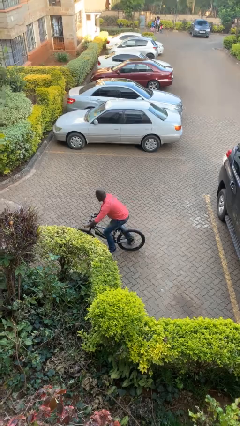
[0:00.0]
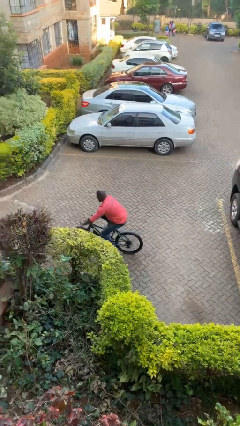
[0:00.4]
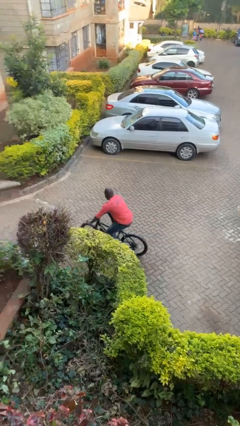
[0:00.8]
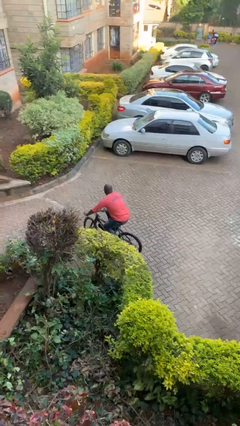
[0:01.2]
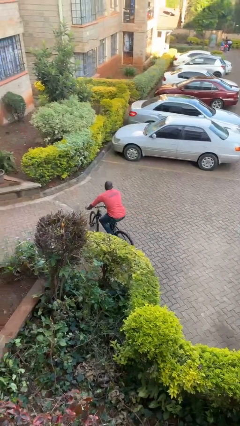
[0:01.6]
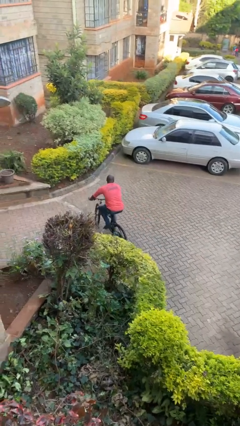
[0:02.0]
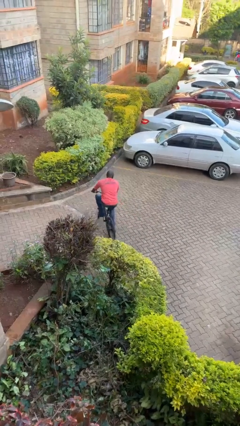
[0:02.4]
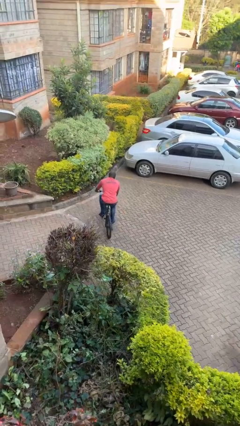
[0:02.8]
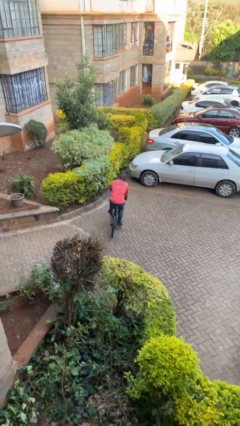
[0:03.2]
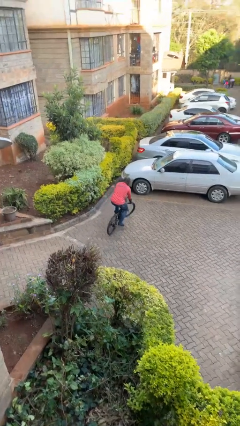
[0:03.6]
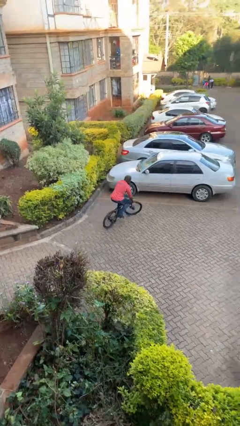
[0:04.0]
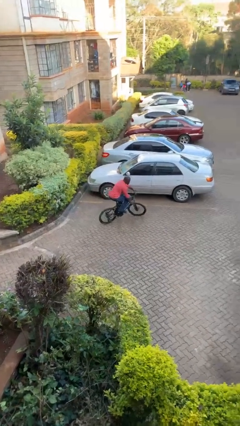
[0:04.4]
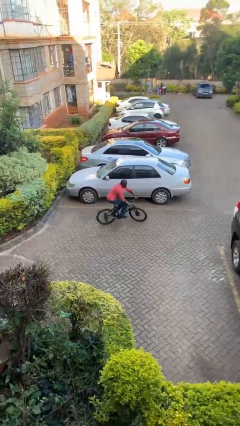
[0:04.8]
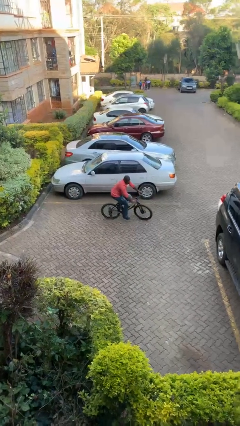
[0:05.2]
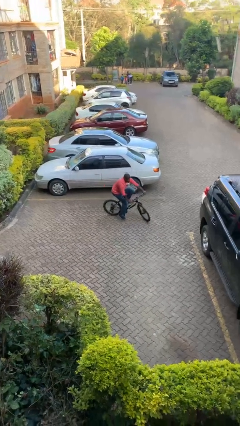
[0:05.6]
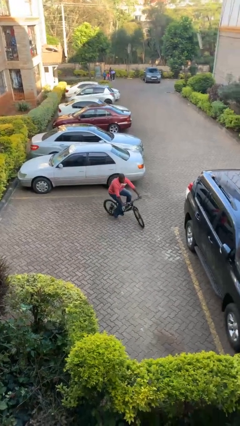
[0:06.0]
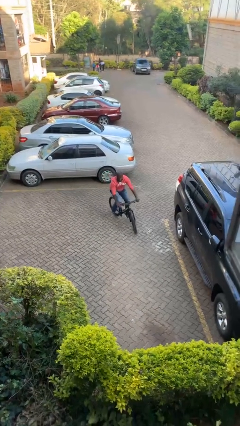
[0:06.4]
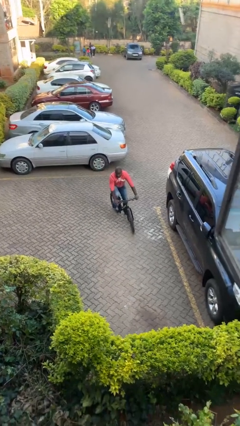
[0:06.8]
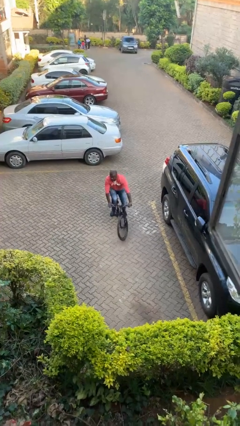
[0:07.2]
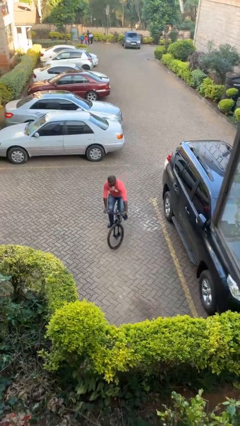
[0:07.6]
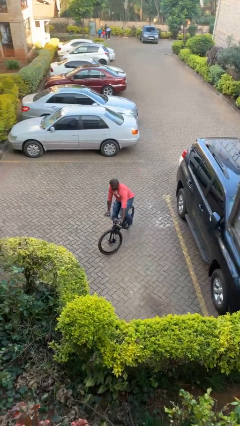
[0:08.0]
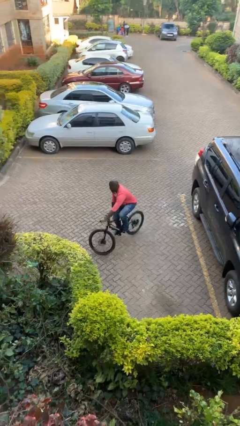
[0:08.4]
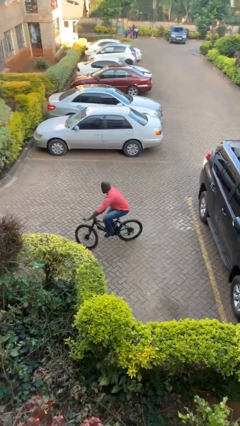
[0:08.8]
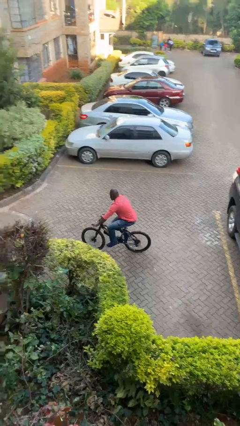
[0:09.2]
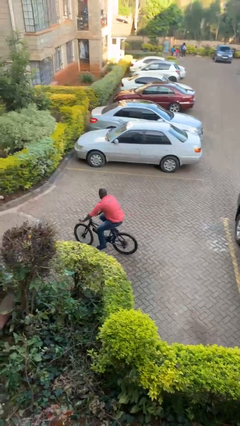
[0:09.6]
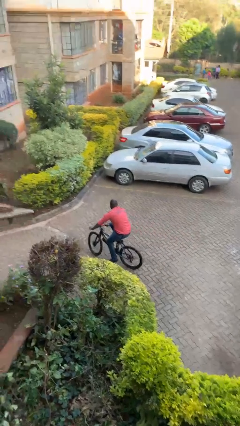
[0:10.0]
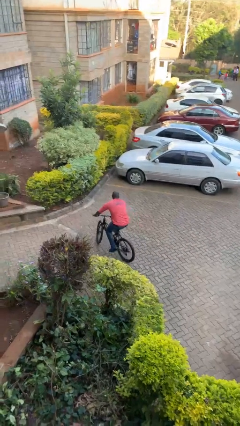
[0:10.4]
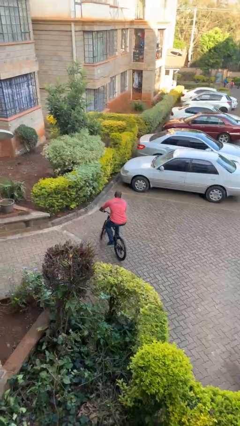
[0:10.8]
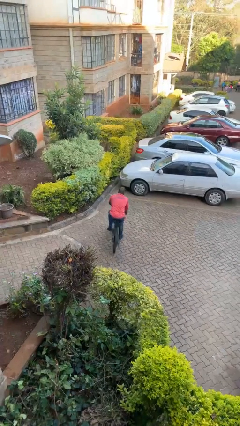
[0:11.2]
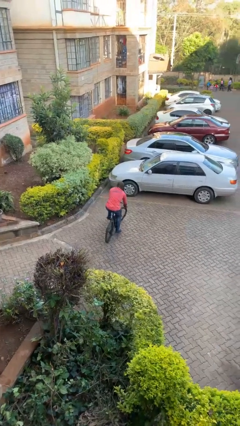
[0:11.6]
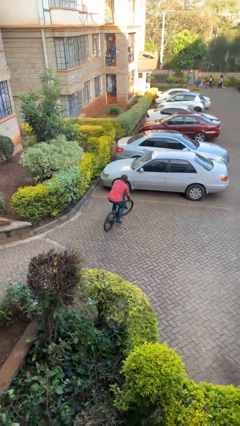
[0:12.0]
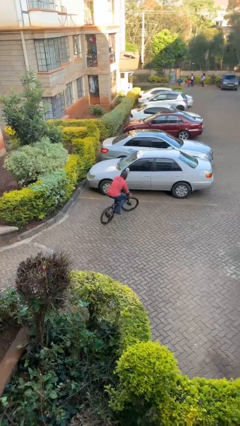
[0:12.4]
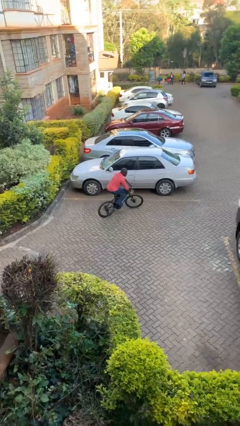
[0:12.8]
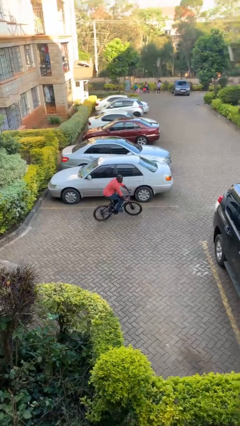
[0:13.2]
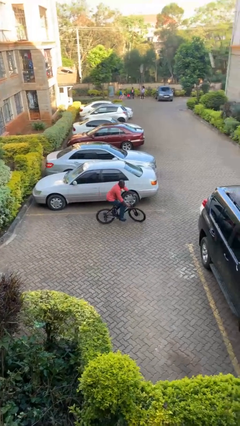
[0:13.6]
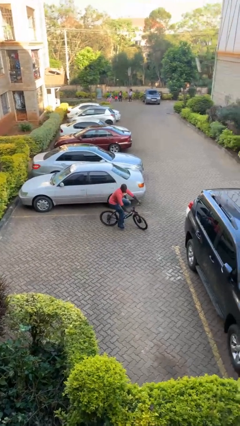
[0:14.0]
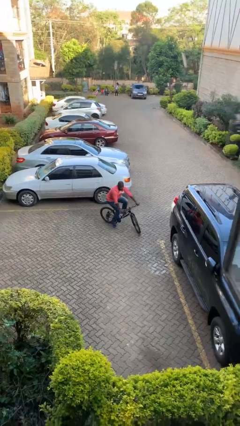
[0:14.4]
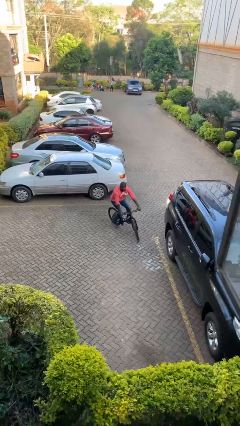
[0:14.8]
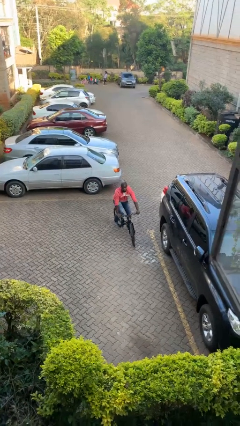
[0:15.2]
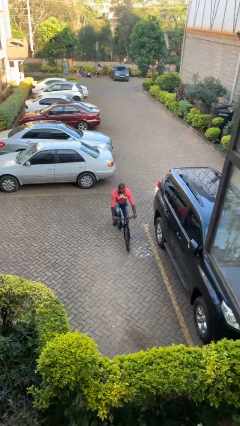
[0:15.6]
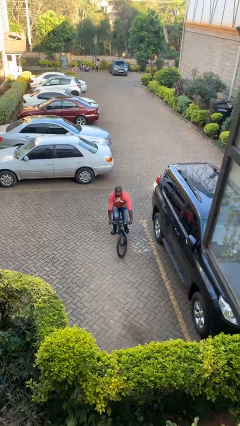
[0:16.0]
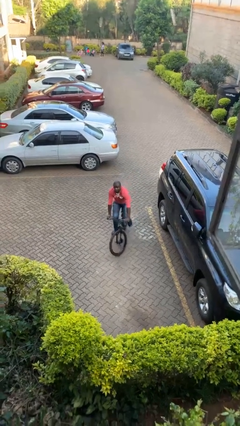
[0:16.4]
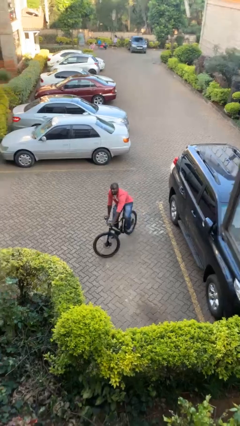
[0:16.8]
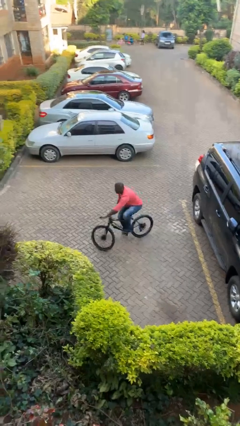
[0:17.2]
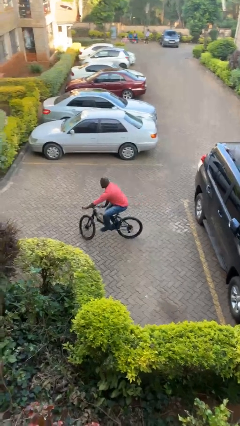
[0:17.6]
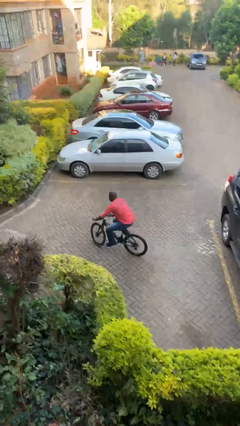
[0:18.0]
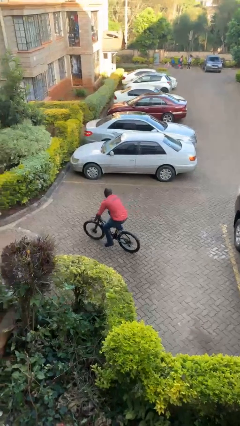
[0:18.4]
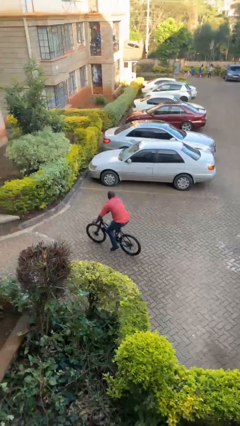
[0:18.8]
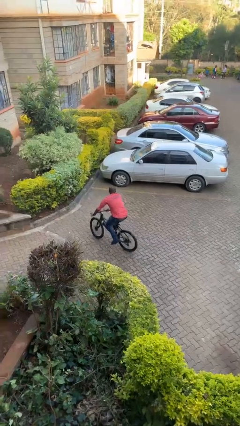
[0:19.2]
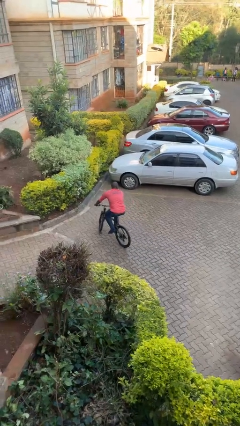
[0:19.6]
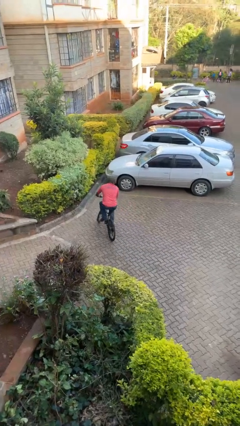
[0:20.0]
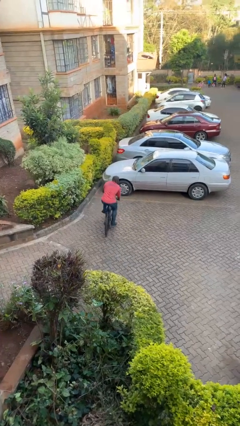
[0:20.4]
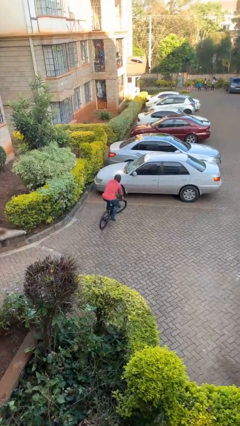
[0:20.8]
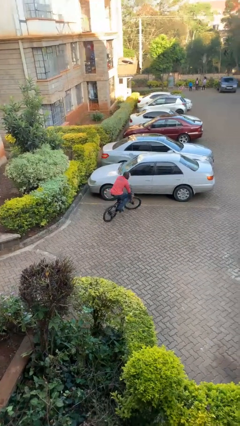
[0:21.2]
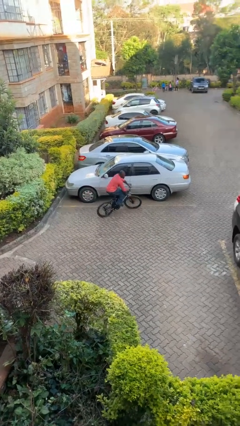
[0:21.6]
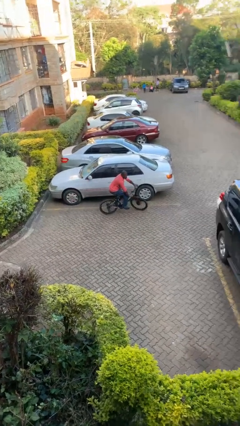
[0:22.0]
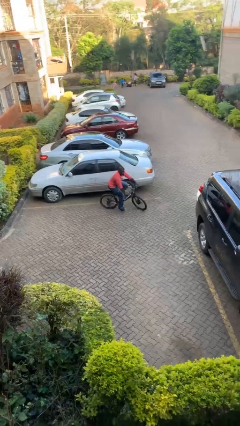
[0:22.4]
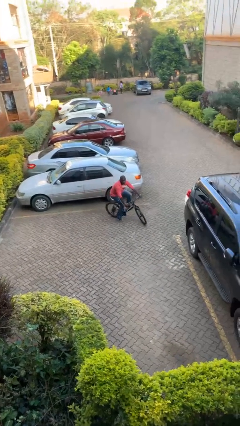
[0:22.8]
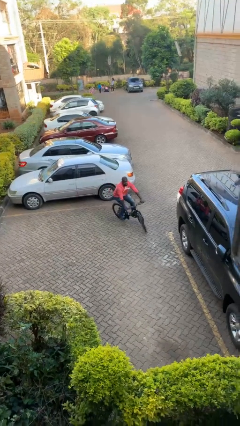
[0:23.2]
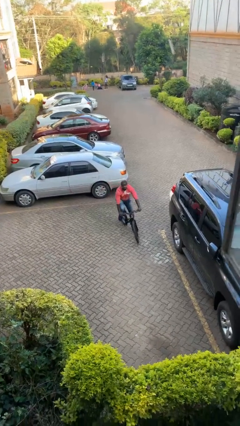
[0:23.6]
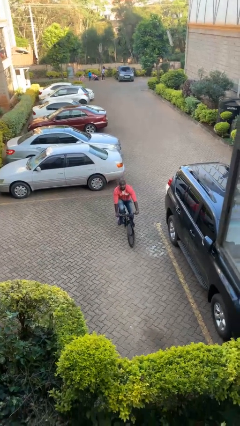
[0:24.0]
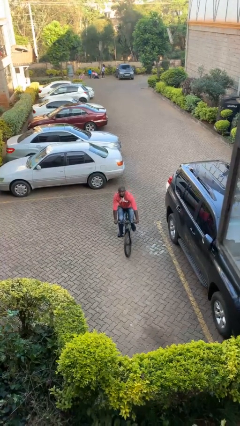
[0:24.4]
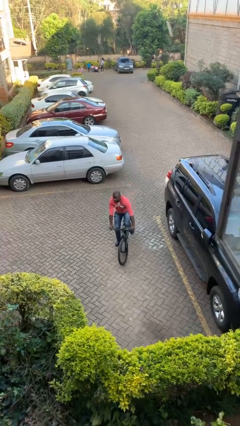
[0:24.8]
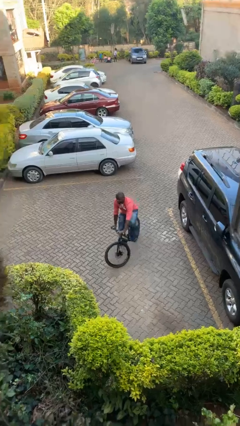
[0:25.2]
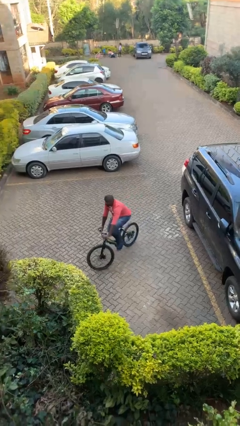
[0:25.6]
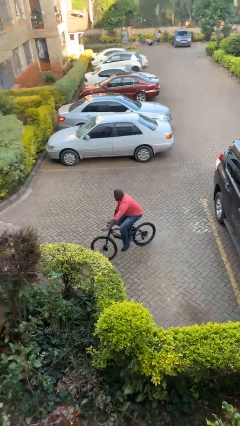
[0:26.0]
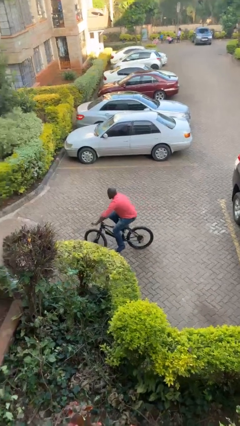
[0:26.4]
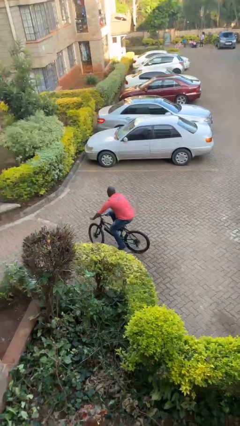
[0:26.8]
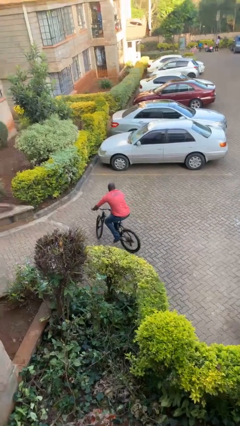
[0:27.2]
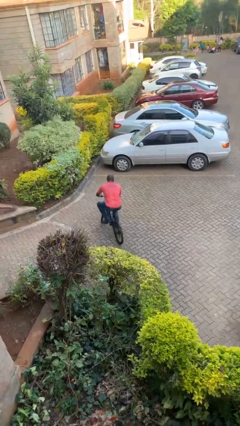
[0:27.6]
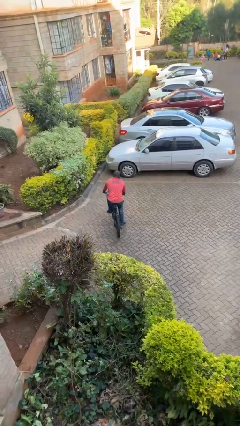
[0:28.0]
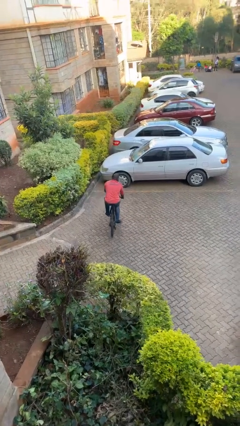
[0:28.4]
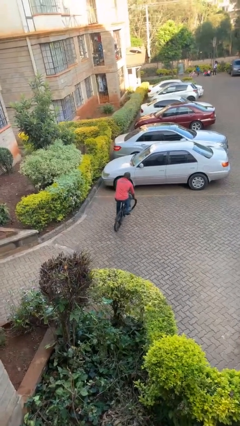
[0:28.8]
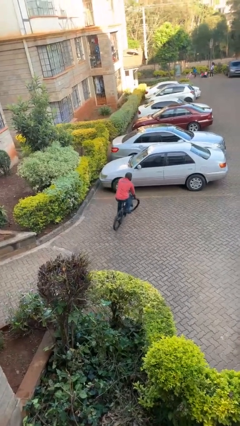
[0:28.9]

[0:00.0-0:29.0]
person rides bicycle

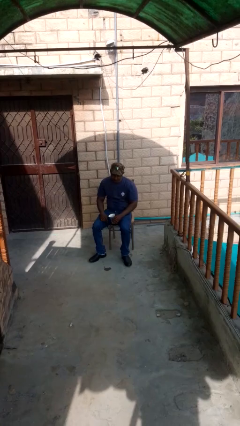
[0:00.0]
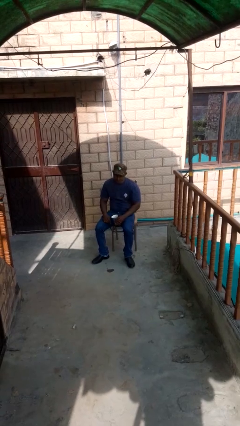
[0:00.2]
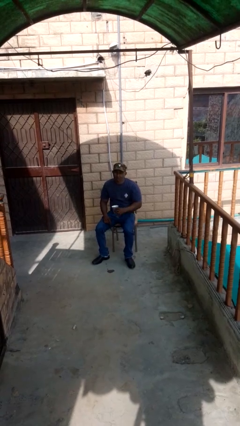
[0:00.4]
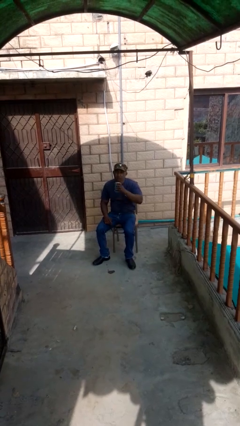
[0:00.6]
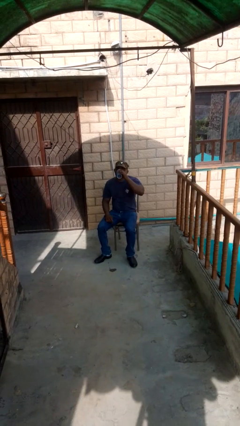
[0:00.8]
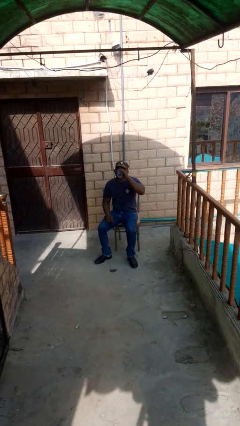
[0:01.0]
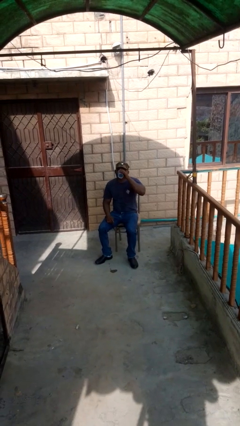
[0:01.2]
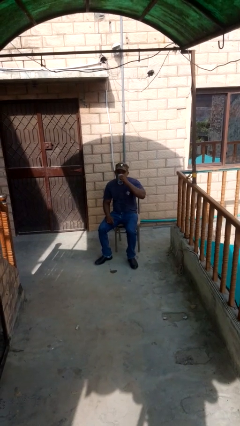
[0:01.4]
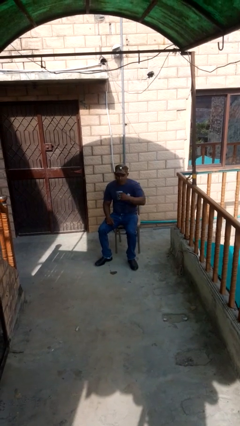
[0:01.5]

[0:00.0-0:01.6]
person drinks from mug

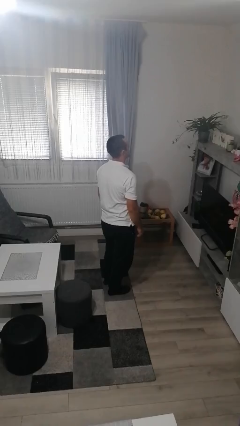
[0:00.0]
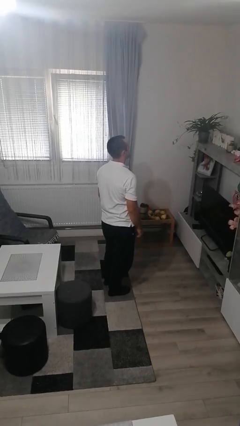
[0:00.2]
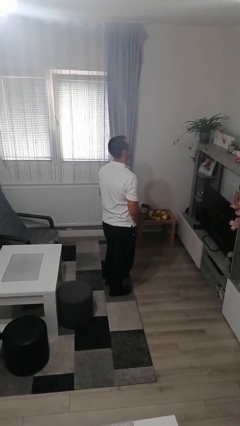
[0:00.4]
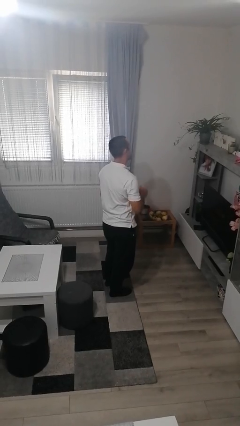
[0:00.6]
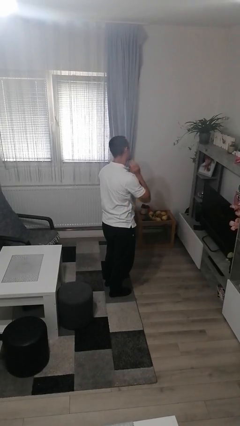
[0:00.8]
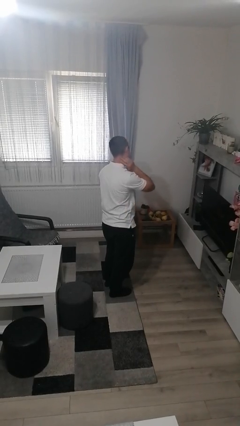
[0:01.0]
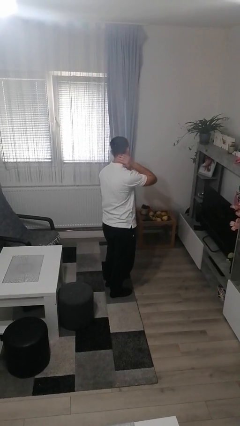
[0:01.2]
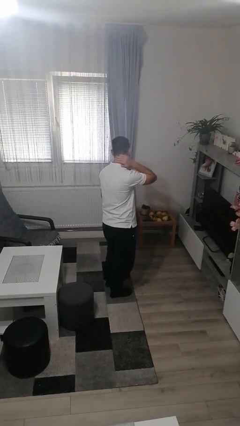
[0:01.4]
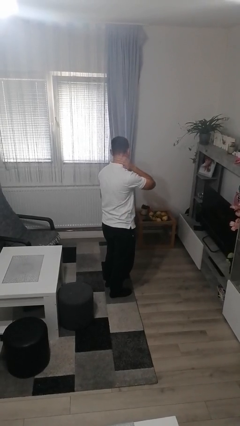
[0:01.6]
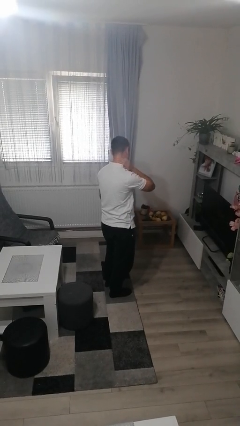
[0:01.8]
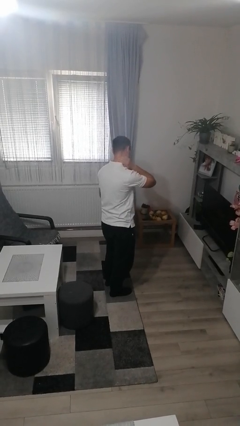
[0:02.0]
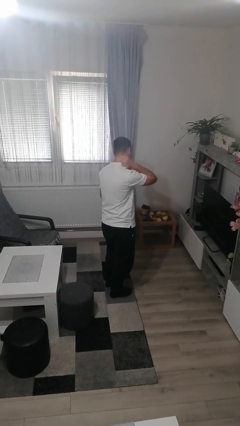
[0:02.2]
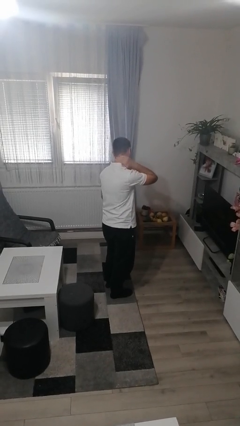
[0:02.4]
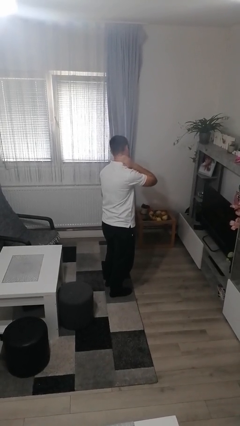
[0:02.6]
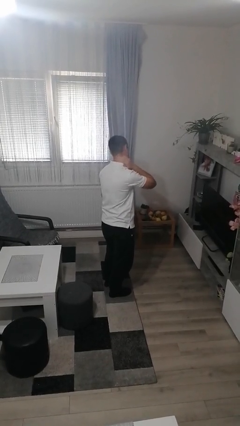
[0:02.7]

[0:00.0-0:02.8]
person rubs neck
